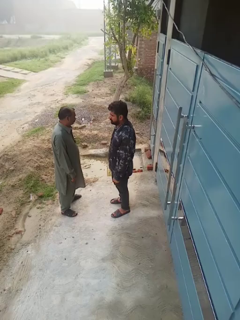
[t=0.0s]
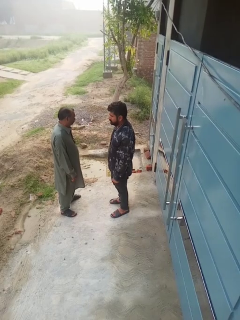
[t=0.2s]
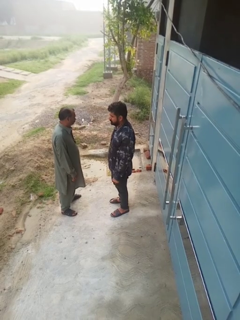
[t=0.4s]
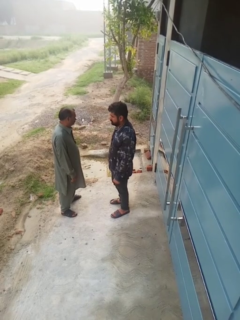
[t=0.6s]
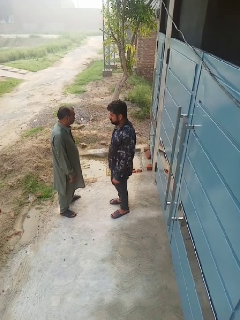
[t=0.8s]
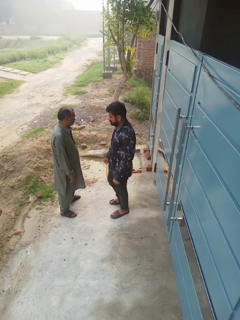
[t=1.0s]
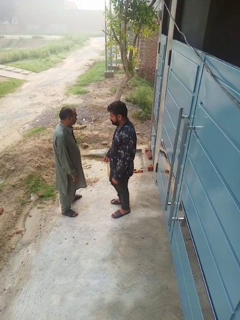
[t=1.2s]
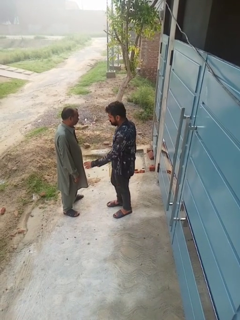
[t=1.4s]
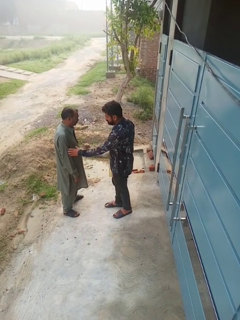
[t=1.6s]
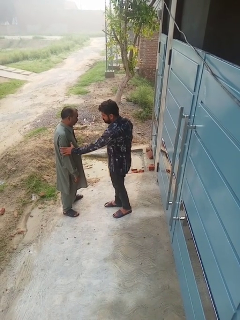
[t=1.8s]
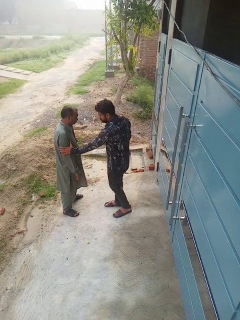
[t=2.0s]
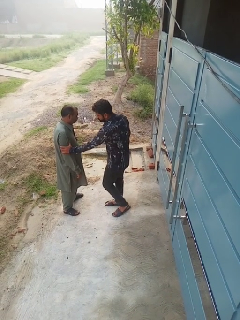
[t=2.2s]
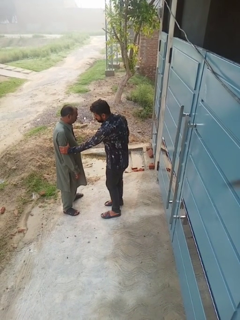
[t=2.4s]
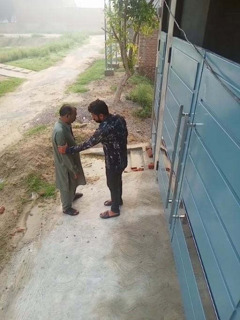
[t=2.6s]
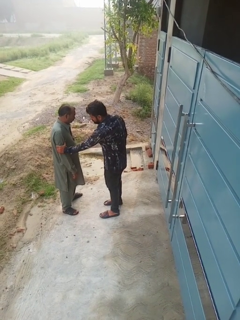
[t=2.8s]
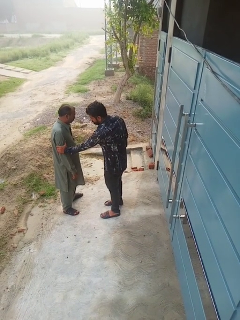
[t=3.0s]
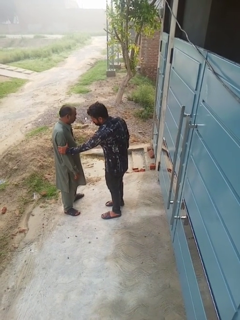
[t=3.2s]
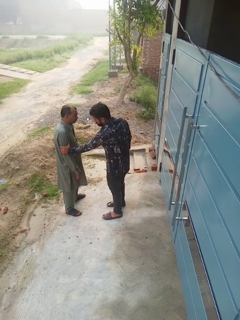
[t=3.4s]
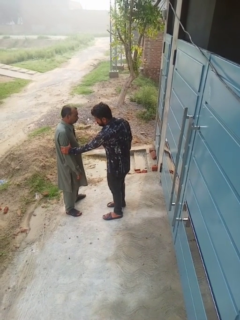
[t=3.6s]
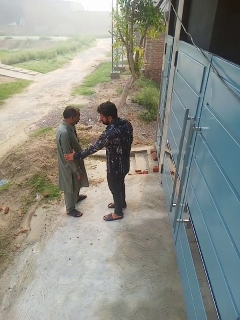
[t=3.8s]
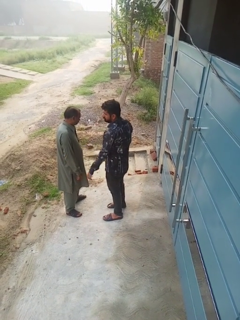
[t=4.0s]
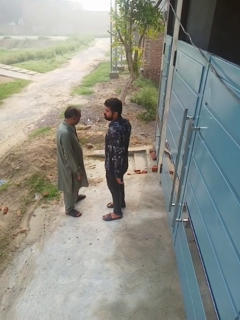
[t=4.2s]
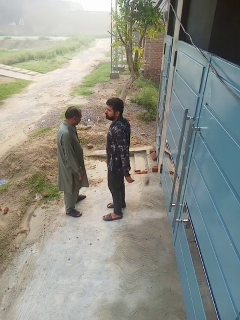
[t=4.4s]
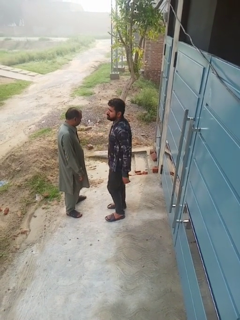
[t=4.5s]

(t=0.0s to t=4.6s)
person grabs person by bicep

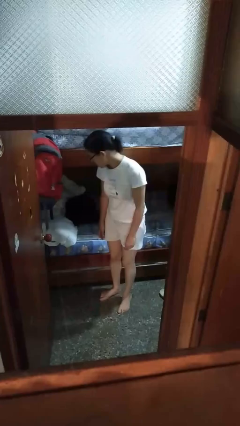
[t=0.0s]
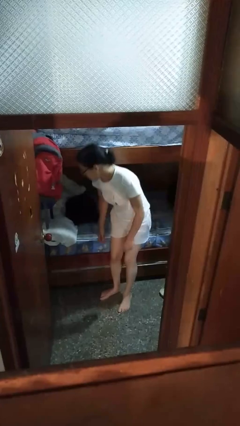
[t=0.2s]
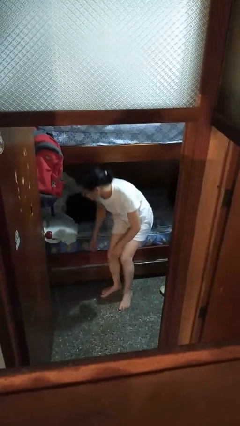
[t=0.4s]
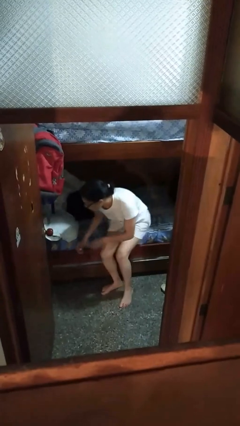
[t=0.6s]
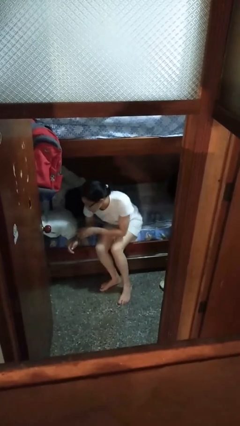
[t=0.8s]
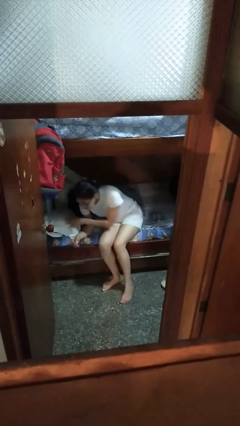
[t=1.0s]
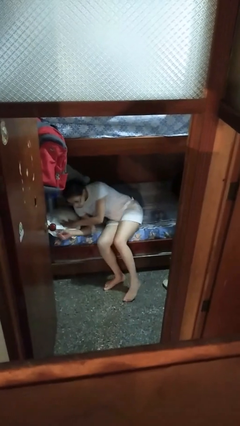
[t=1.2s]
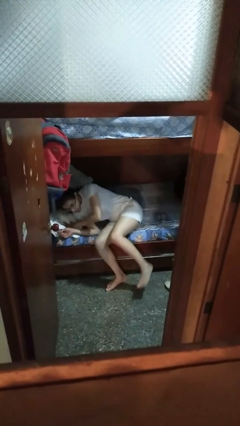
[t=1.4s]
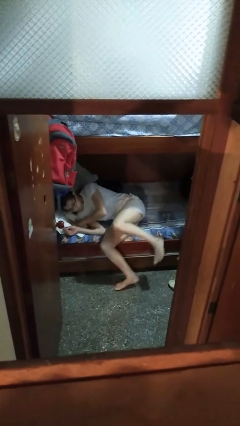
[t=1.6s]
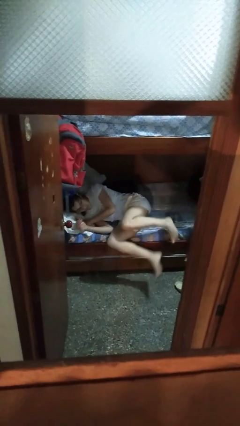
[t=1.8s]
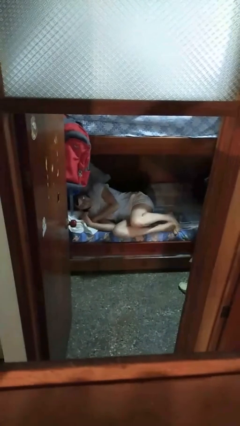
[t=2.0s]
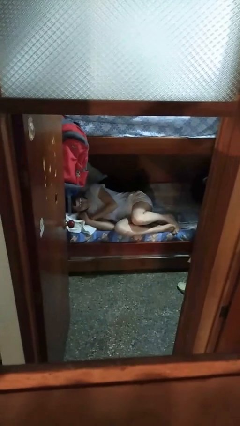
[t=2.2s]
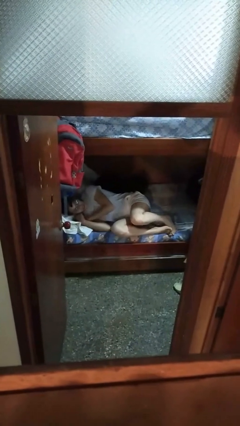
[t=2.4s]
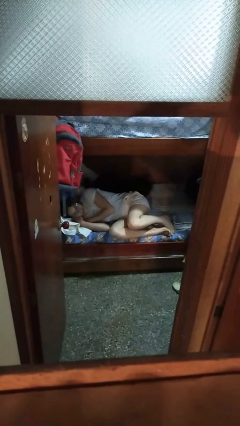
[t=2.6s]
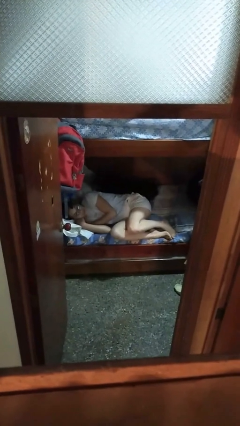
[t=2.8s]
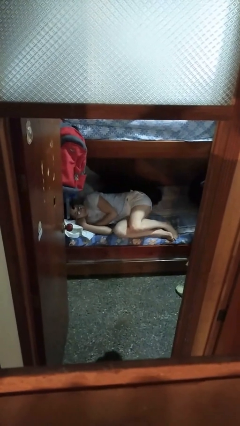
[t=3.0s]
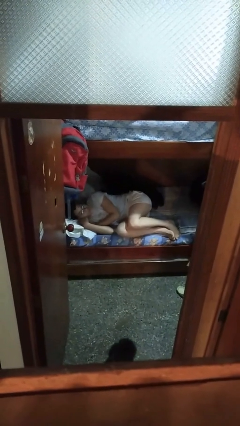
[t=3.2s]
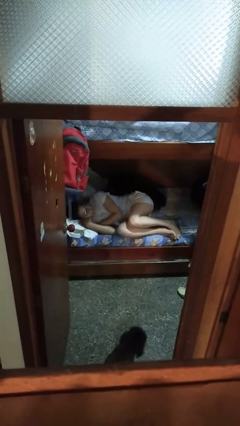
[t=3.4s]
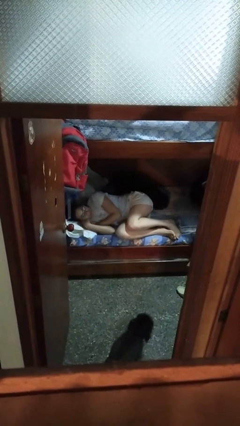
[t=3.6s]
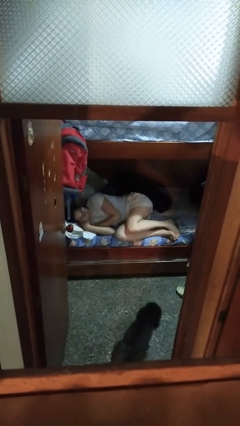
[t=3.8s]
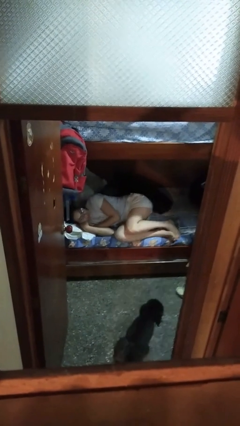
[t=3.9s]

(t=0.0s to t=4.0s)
person lies down on bed

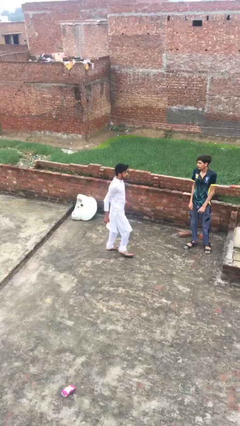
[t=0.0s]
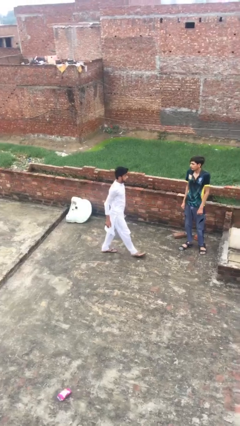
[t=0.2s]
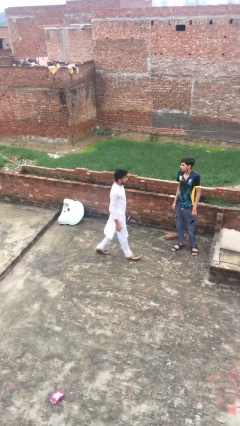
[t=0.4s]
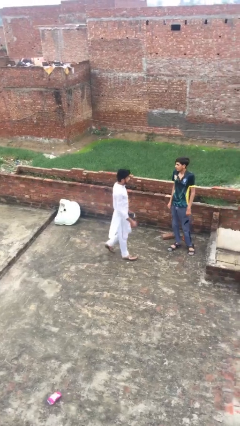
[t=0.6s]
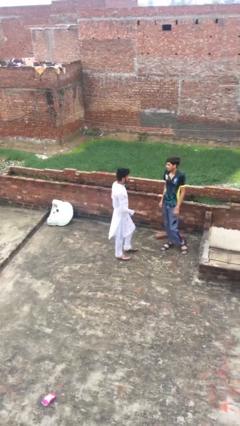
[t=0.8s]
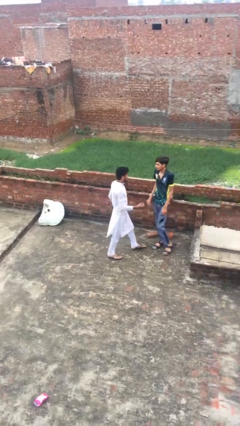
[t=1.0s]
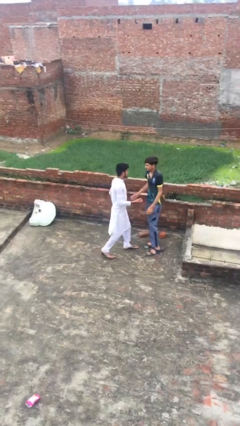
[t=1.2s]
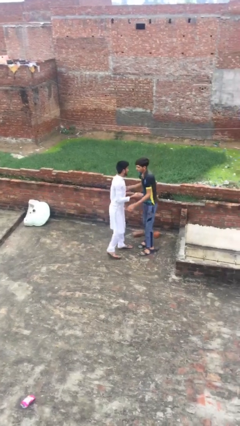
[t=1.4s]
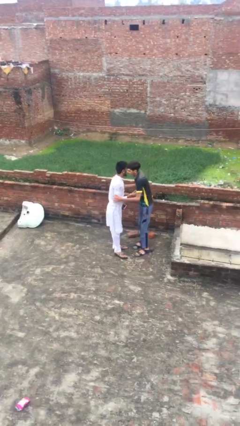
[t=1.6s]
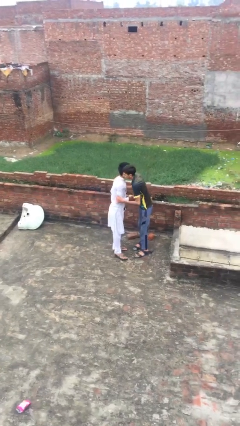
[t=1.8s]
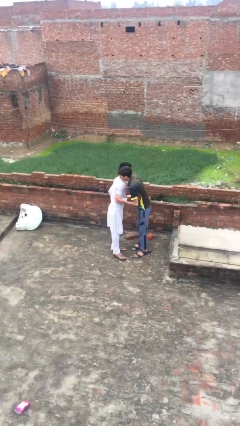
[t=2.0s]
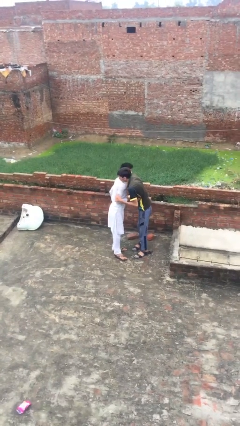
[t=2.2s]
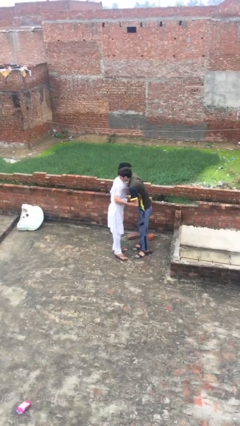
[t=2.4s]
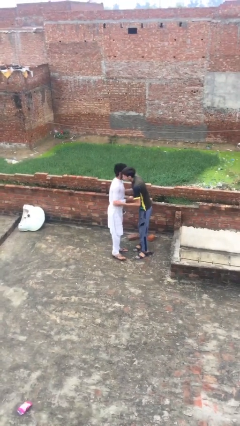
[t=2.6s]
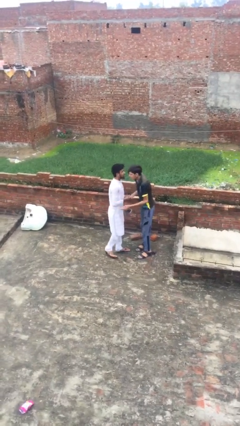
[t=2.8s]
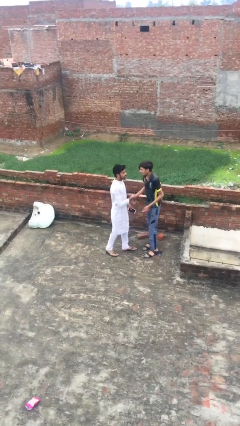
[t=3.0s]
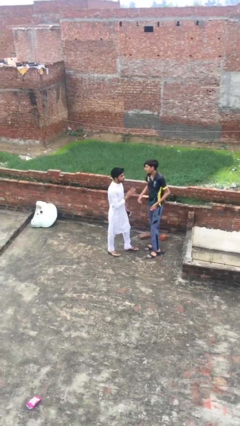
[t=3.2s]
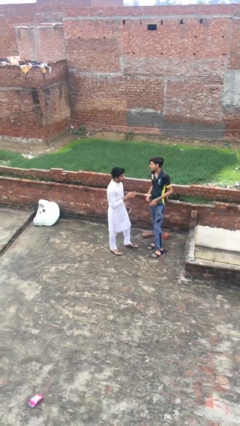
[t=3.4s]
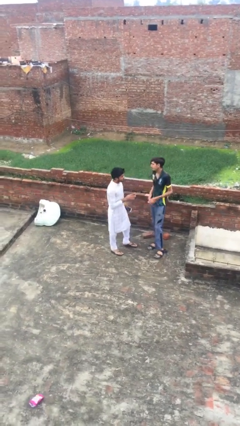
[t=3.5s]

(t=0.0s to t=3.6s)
person embraces person

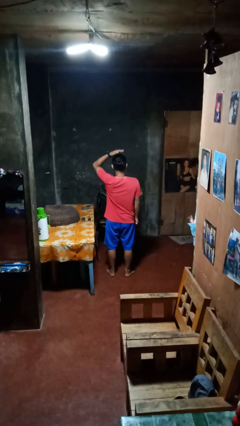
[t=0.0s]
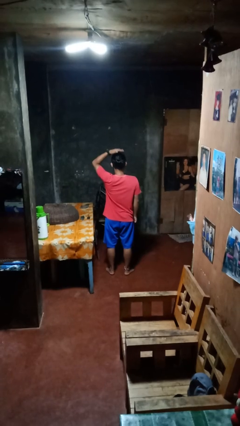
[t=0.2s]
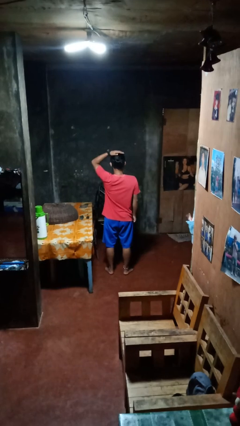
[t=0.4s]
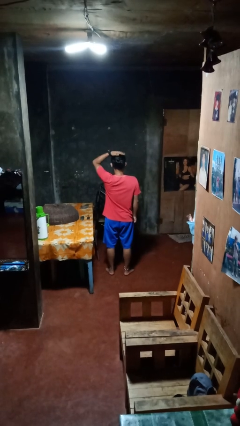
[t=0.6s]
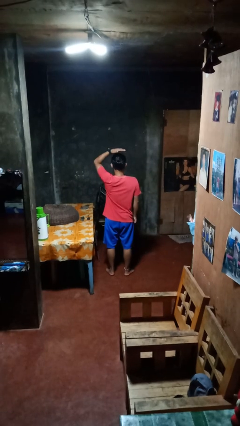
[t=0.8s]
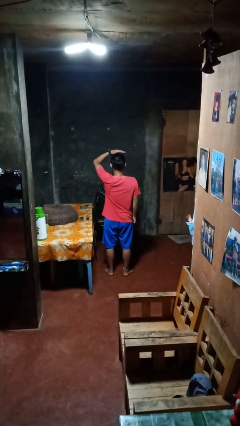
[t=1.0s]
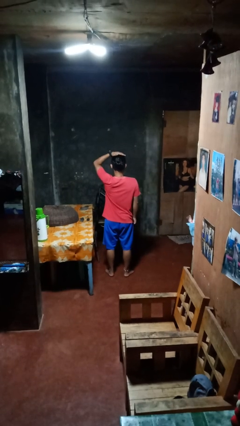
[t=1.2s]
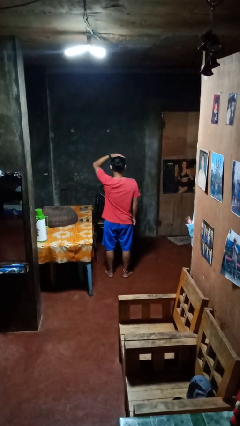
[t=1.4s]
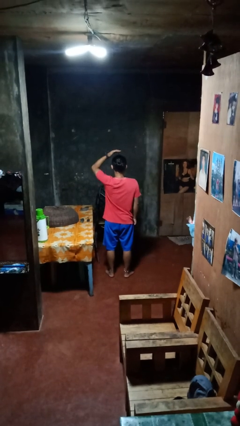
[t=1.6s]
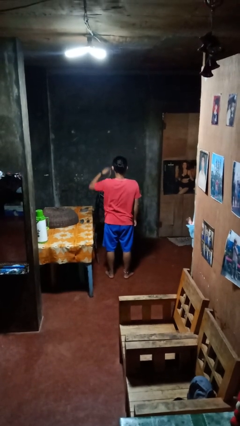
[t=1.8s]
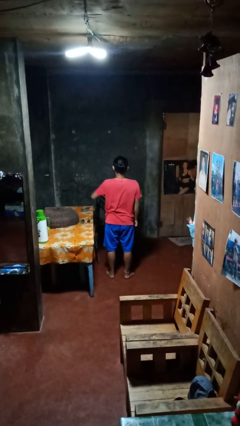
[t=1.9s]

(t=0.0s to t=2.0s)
person pats head

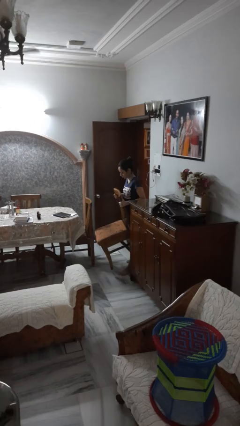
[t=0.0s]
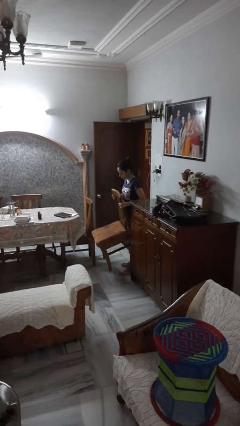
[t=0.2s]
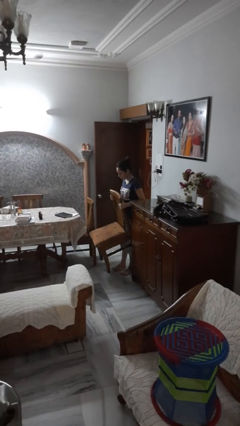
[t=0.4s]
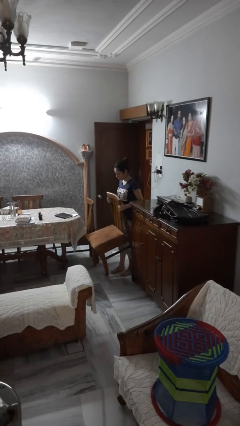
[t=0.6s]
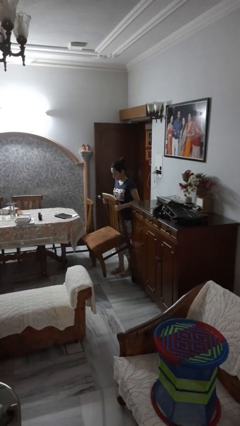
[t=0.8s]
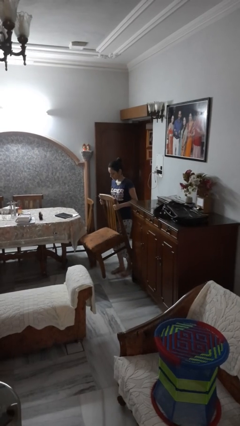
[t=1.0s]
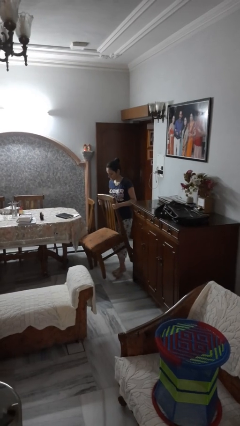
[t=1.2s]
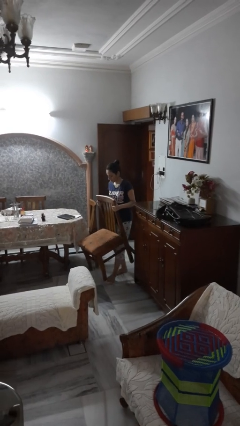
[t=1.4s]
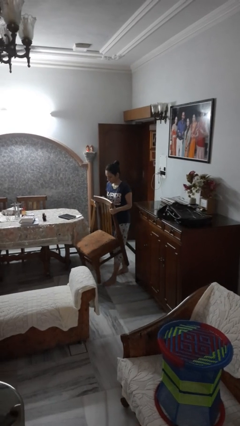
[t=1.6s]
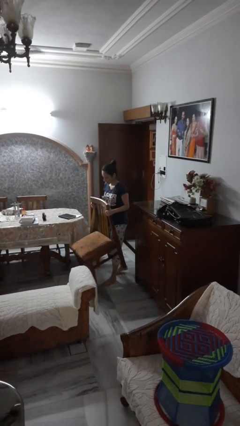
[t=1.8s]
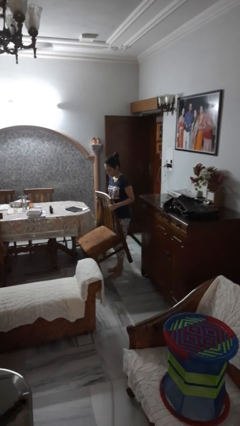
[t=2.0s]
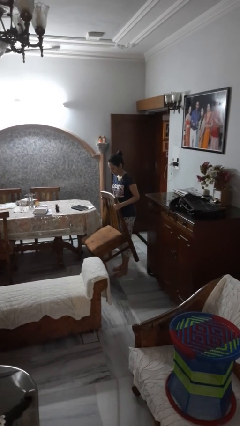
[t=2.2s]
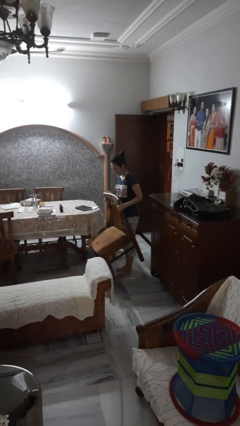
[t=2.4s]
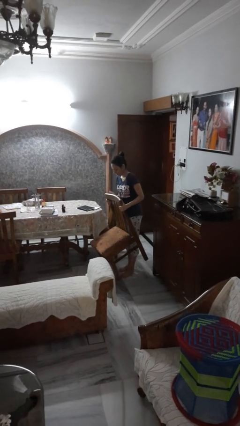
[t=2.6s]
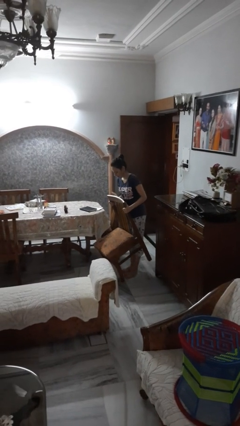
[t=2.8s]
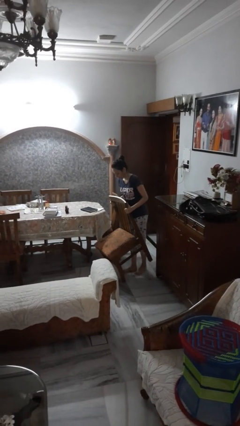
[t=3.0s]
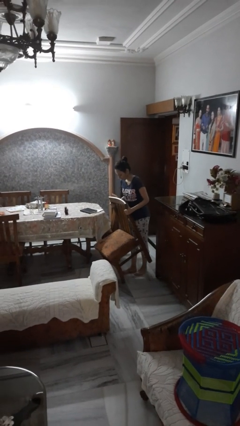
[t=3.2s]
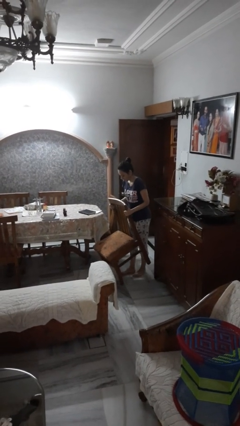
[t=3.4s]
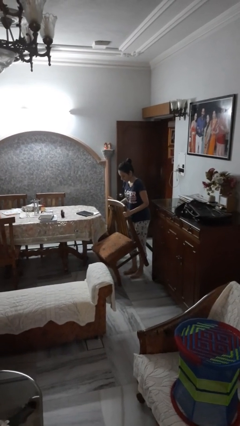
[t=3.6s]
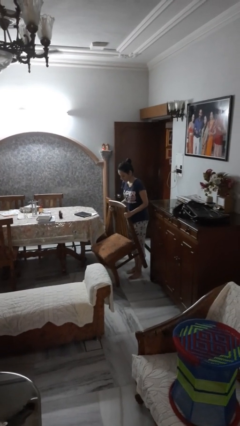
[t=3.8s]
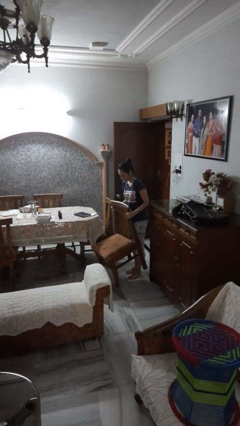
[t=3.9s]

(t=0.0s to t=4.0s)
person carries furniture

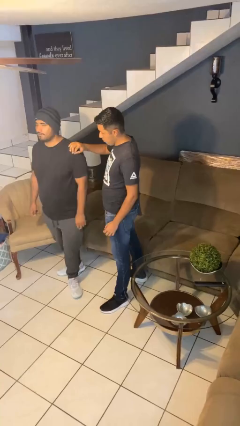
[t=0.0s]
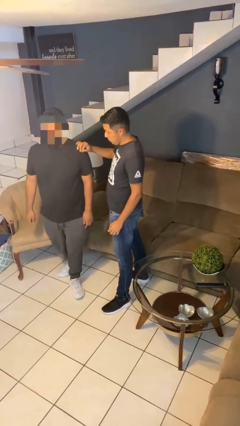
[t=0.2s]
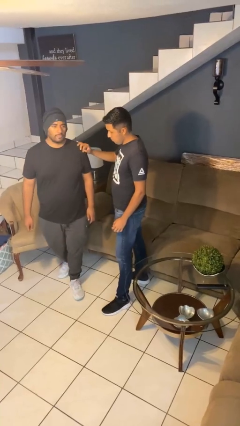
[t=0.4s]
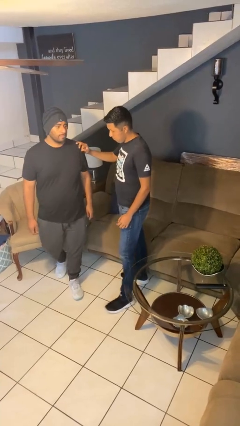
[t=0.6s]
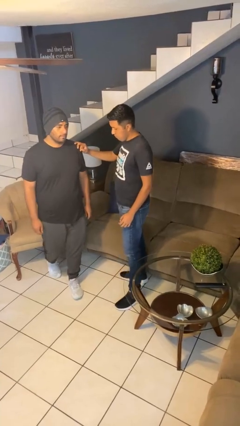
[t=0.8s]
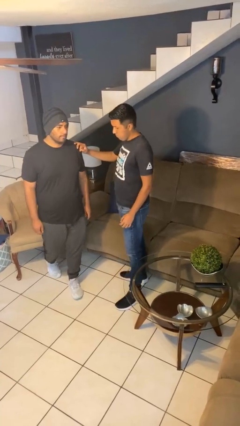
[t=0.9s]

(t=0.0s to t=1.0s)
person spins person around
